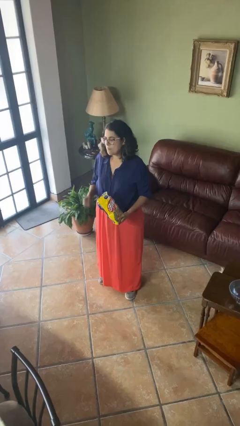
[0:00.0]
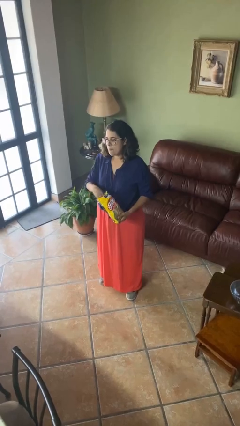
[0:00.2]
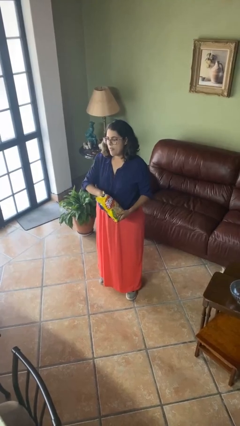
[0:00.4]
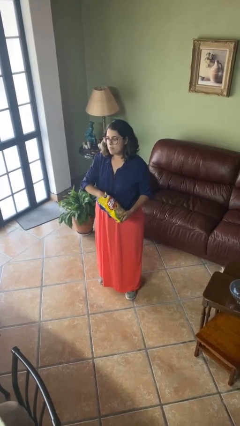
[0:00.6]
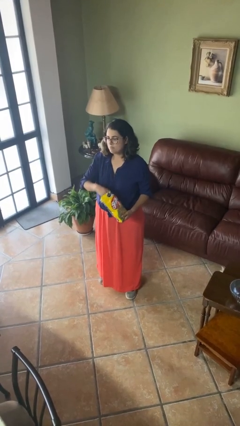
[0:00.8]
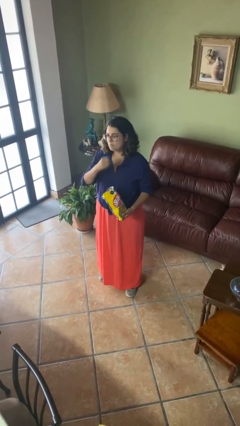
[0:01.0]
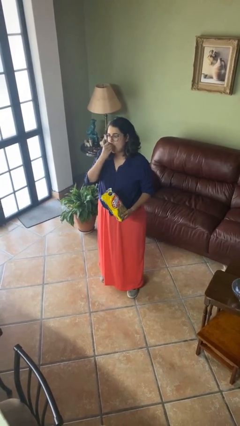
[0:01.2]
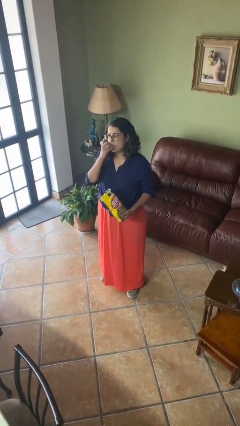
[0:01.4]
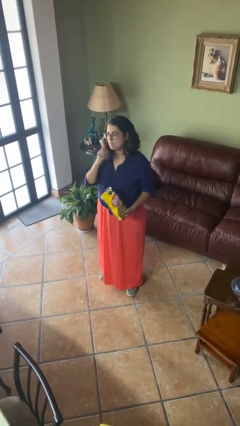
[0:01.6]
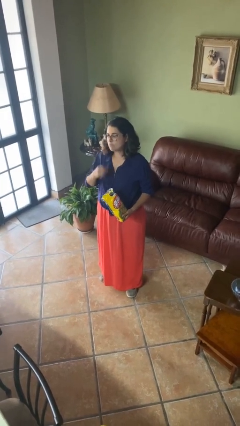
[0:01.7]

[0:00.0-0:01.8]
person eats snack from bag

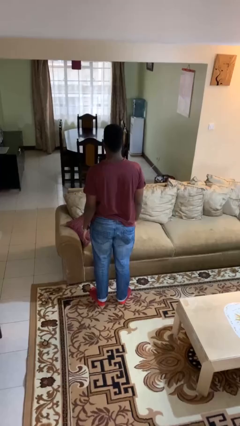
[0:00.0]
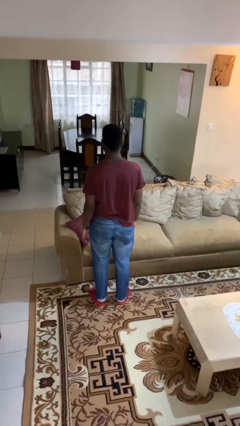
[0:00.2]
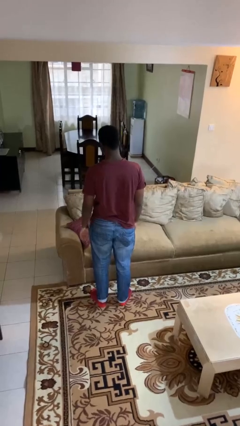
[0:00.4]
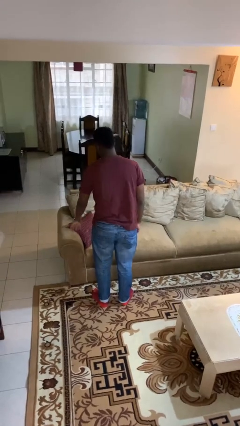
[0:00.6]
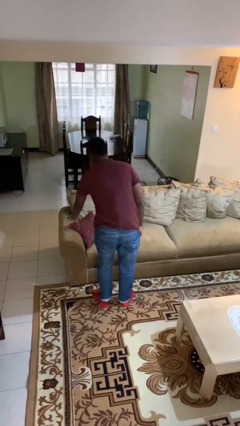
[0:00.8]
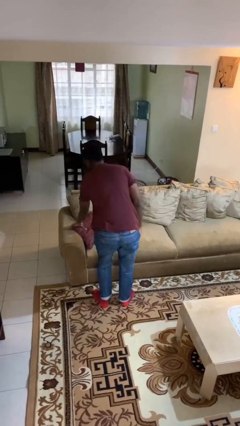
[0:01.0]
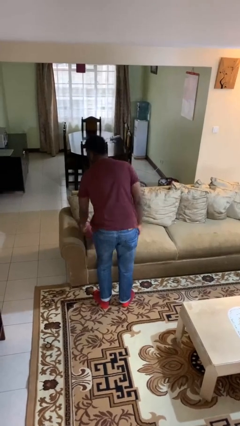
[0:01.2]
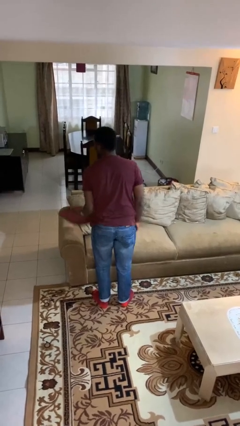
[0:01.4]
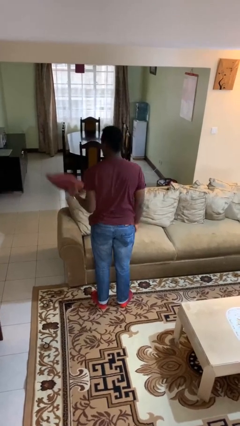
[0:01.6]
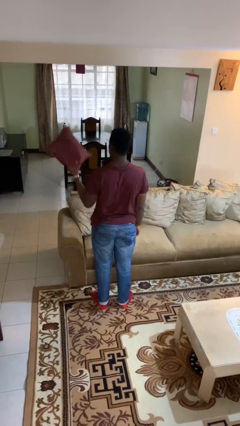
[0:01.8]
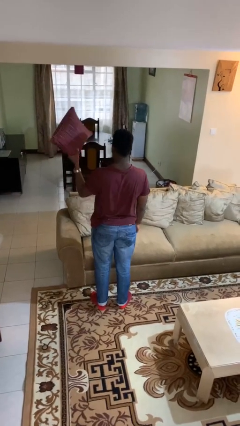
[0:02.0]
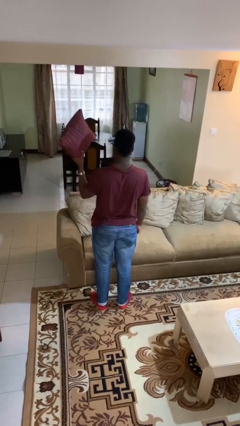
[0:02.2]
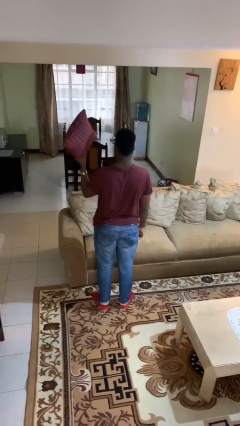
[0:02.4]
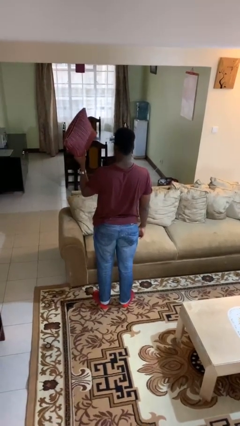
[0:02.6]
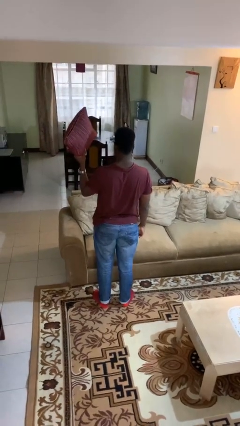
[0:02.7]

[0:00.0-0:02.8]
person picks up object from couch

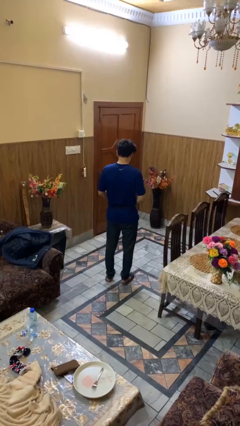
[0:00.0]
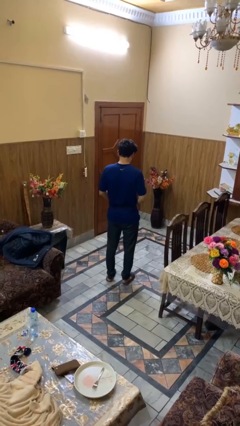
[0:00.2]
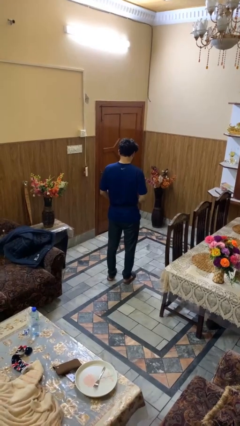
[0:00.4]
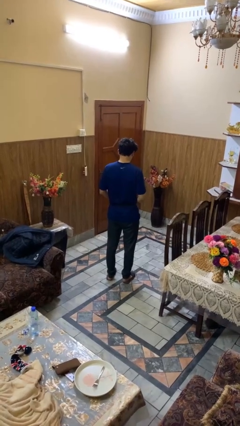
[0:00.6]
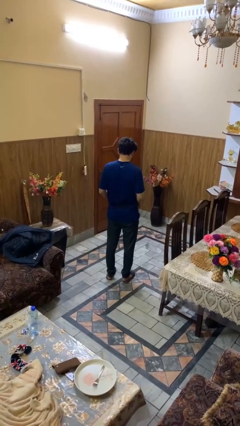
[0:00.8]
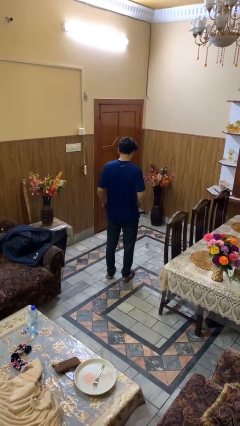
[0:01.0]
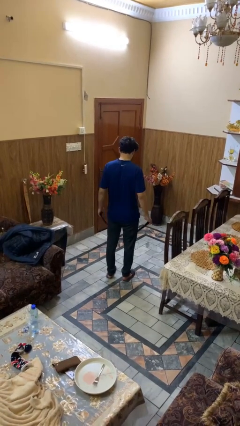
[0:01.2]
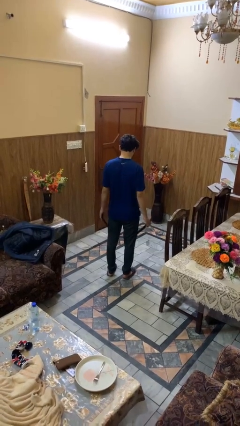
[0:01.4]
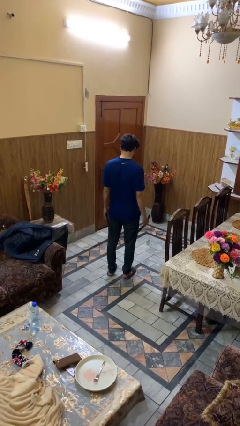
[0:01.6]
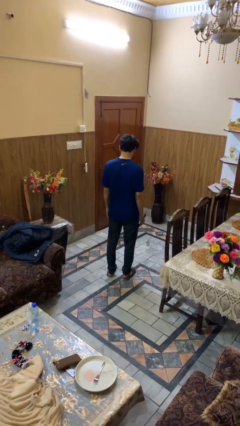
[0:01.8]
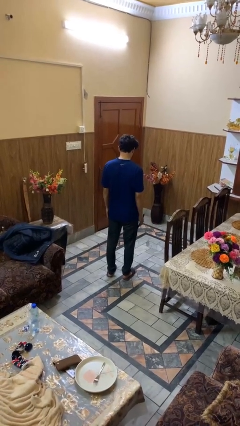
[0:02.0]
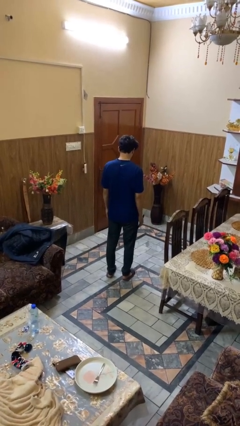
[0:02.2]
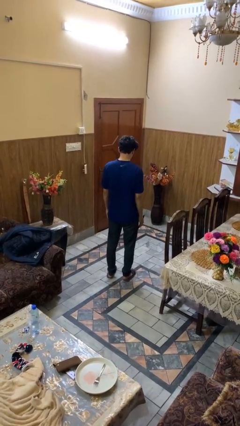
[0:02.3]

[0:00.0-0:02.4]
person takes off belt

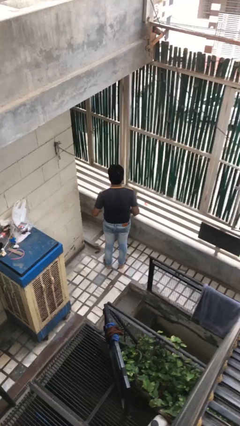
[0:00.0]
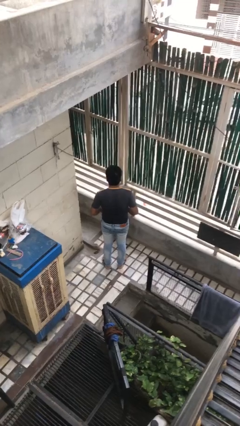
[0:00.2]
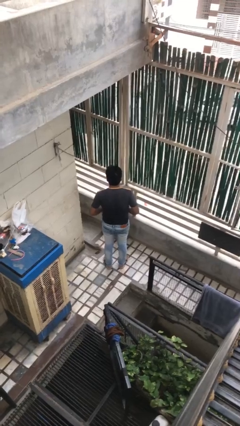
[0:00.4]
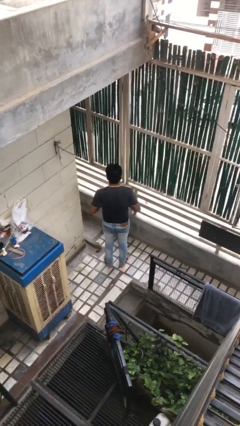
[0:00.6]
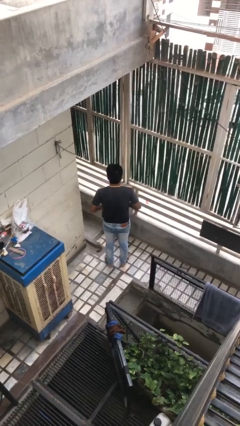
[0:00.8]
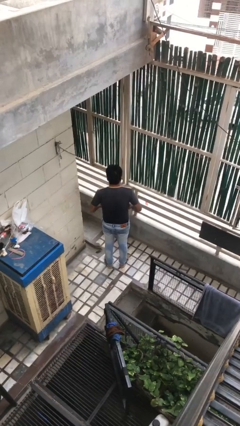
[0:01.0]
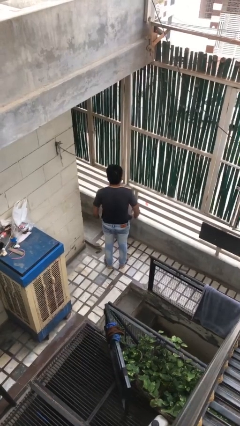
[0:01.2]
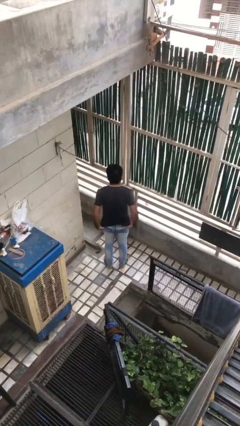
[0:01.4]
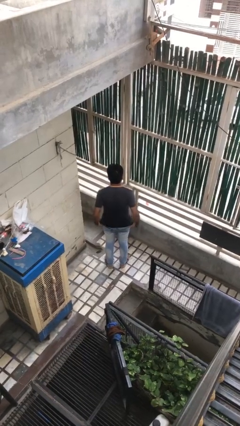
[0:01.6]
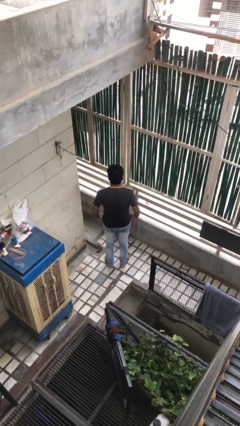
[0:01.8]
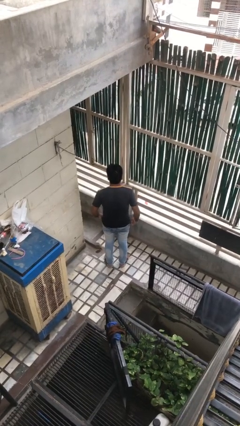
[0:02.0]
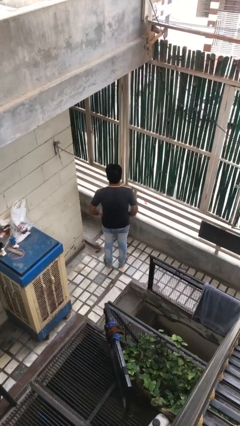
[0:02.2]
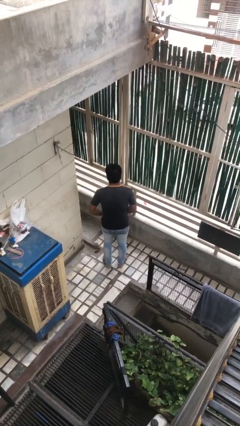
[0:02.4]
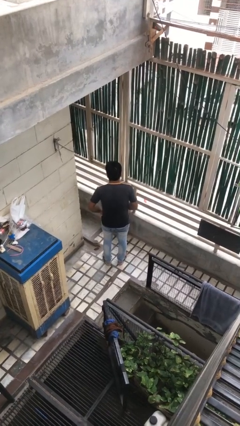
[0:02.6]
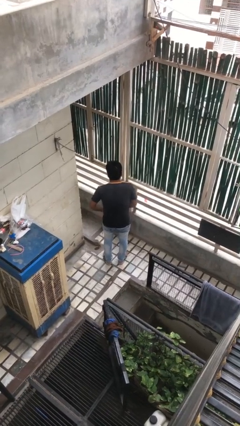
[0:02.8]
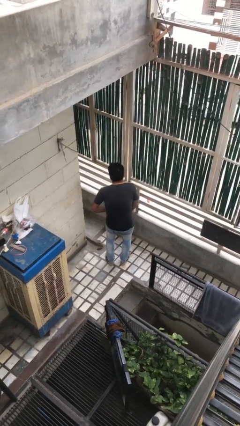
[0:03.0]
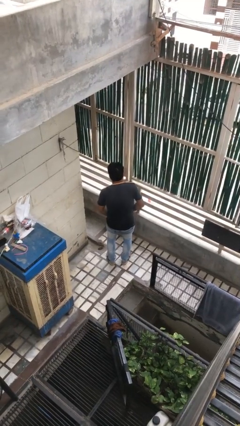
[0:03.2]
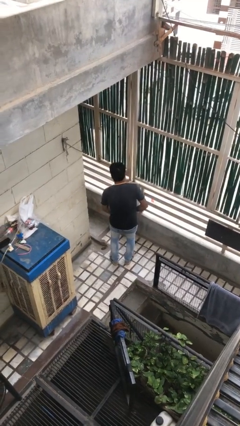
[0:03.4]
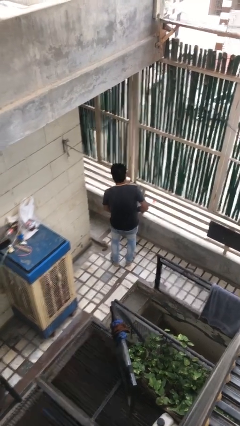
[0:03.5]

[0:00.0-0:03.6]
person untucks shirt

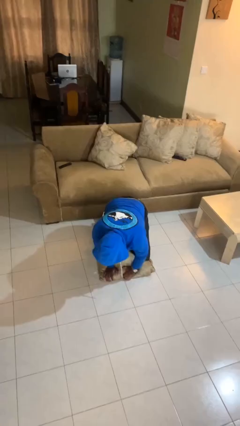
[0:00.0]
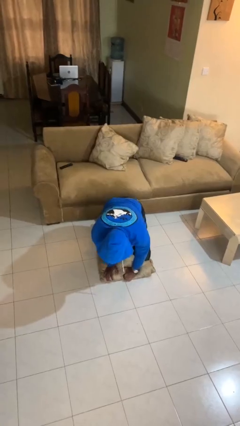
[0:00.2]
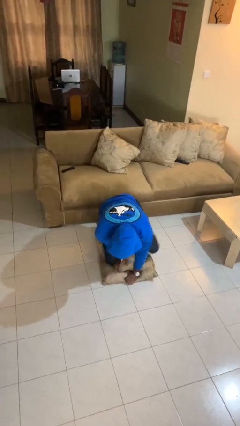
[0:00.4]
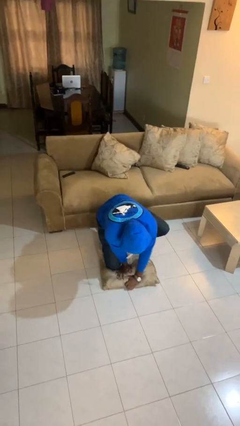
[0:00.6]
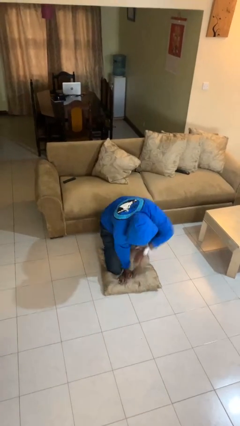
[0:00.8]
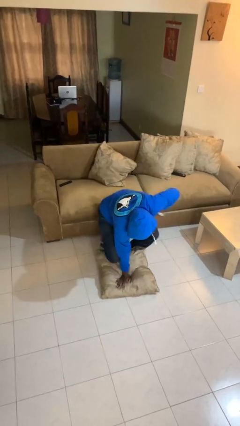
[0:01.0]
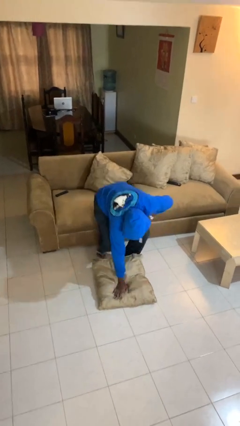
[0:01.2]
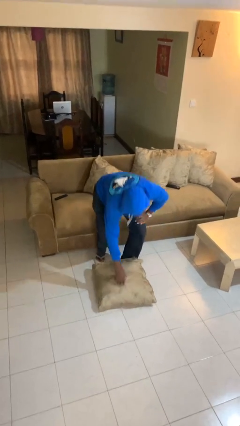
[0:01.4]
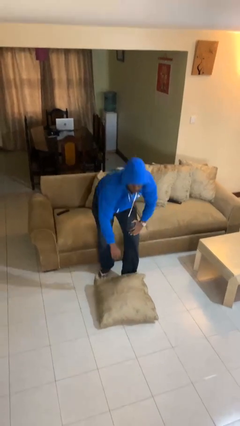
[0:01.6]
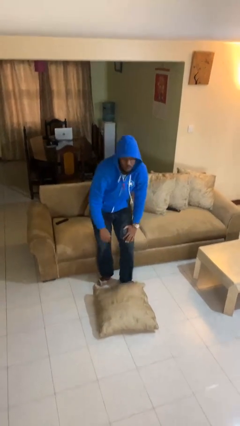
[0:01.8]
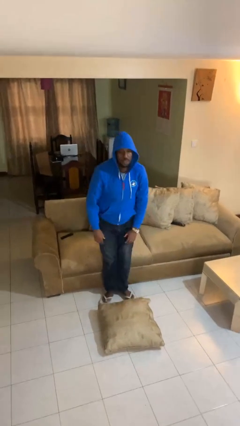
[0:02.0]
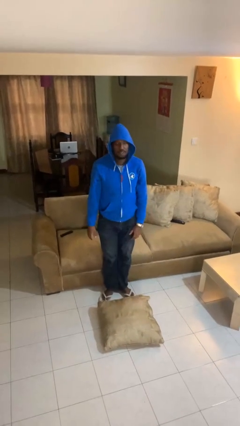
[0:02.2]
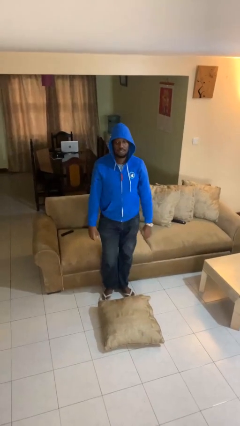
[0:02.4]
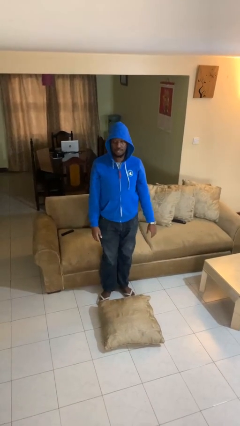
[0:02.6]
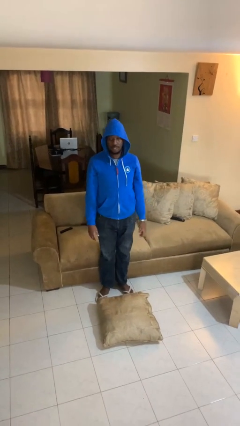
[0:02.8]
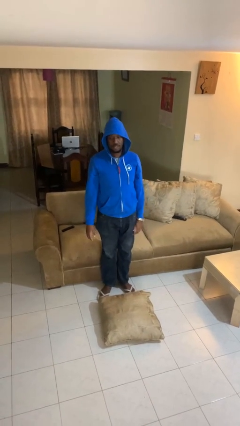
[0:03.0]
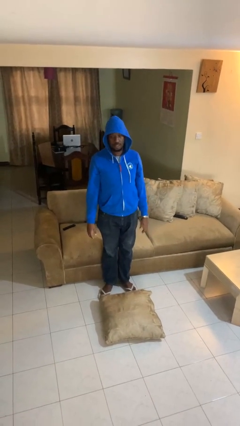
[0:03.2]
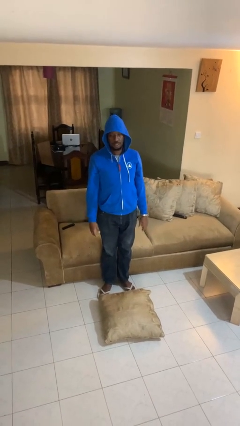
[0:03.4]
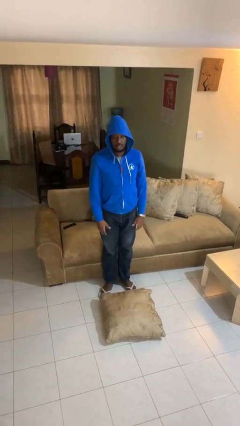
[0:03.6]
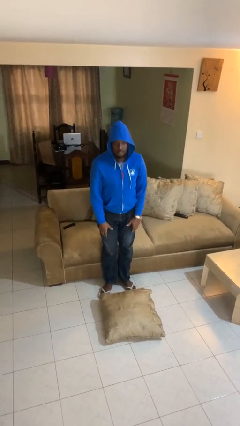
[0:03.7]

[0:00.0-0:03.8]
person stands up from floor

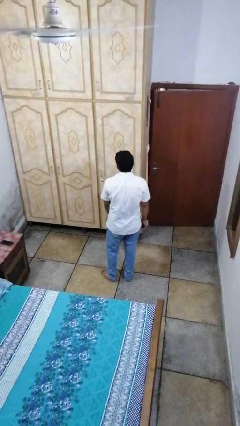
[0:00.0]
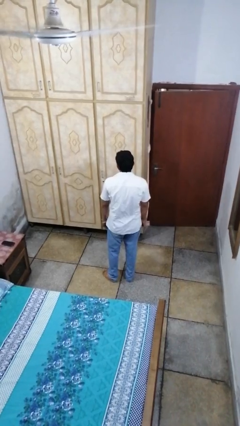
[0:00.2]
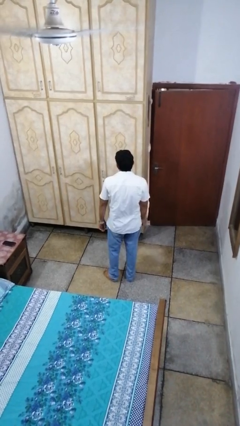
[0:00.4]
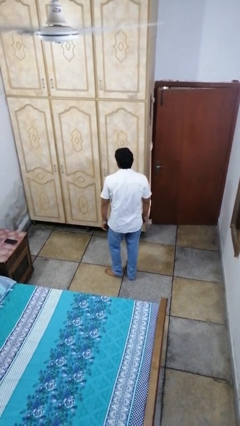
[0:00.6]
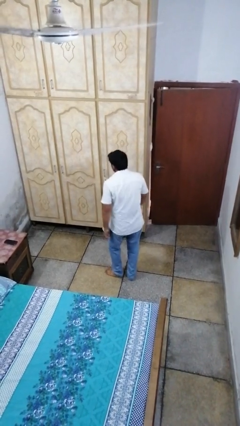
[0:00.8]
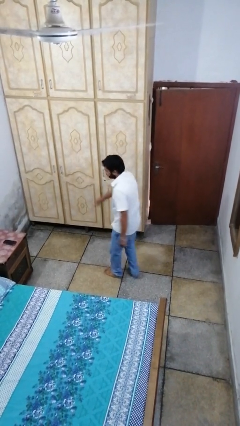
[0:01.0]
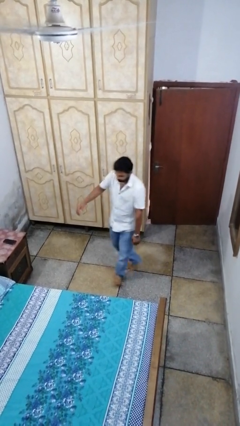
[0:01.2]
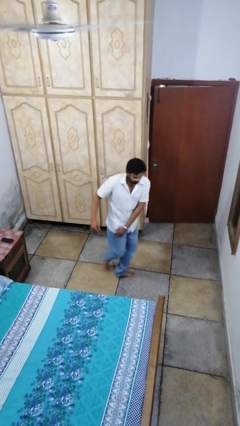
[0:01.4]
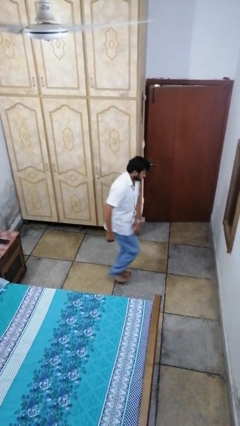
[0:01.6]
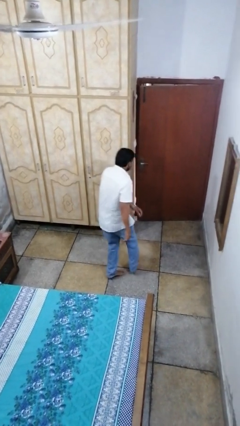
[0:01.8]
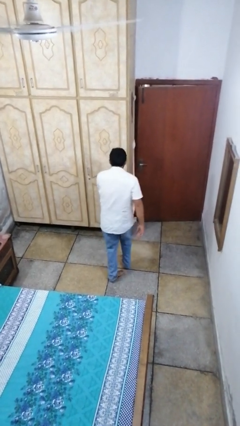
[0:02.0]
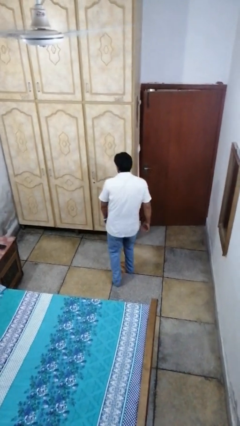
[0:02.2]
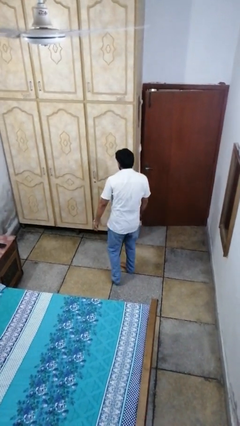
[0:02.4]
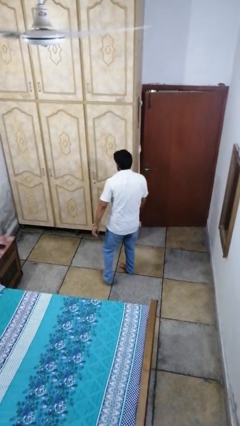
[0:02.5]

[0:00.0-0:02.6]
person twirls

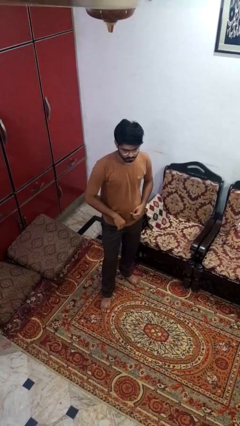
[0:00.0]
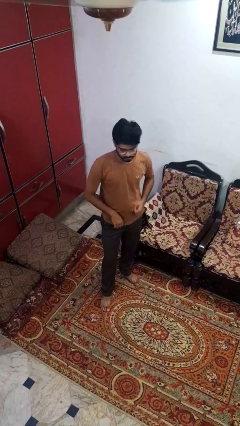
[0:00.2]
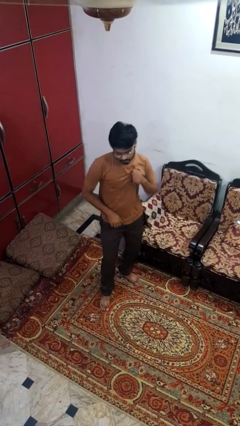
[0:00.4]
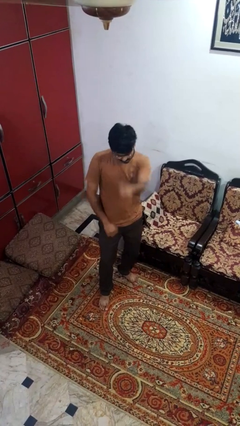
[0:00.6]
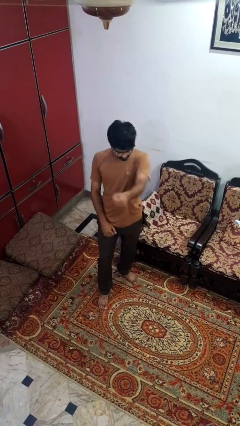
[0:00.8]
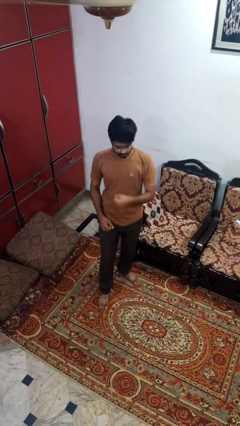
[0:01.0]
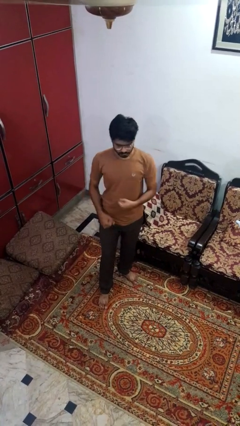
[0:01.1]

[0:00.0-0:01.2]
person punches
